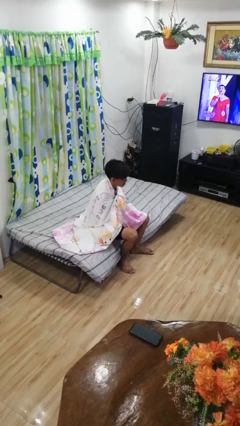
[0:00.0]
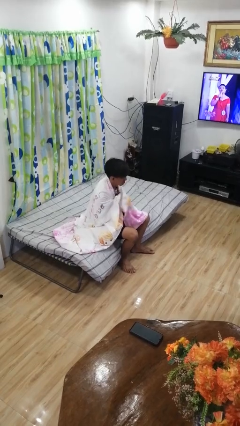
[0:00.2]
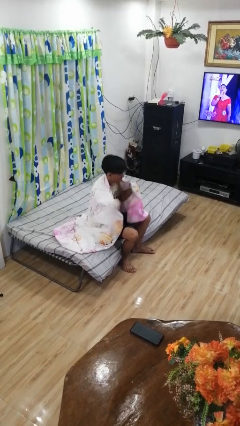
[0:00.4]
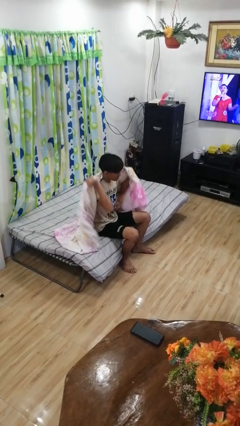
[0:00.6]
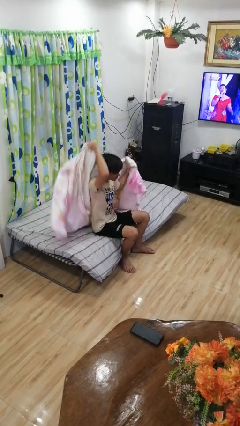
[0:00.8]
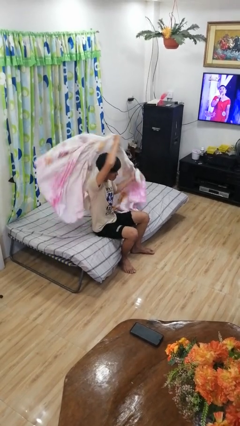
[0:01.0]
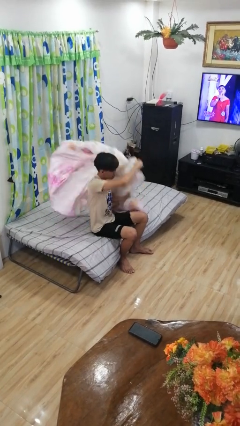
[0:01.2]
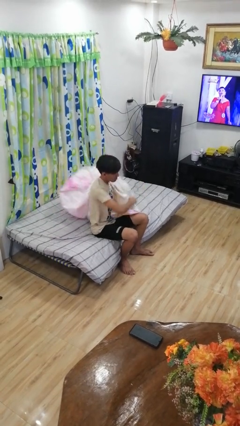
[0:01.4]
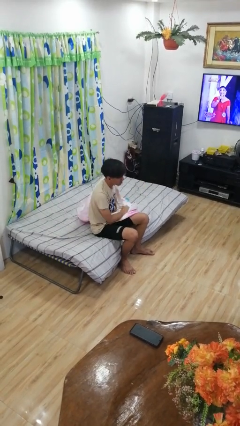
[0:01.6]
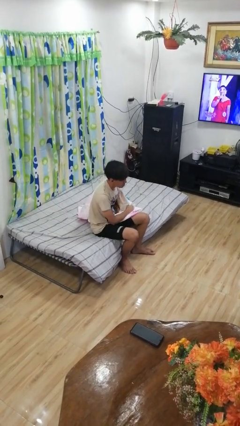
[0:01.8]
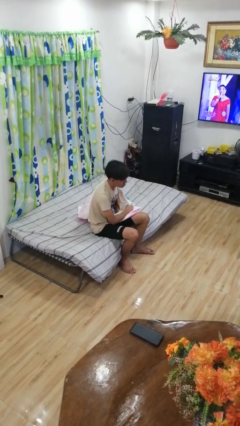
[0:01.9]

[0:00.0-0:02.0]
person uncovers with blanket

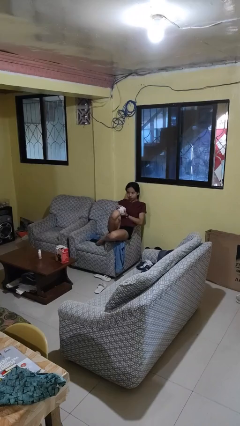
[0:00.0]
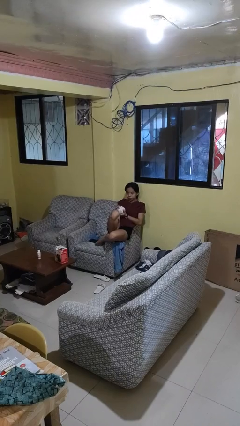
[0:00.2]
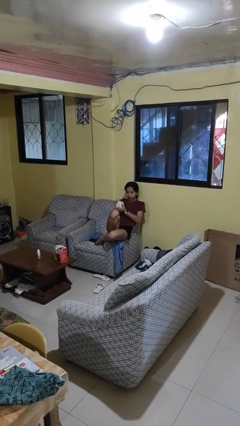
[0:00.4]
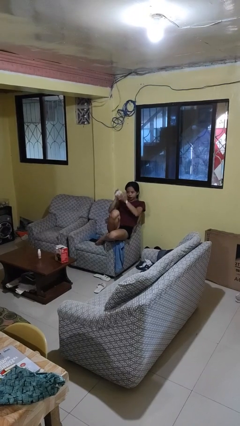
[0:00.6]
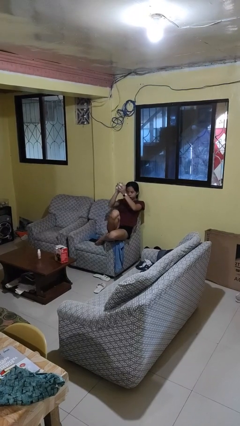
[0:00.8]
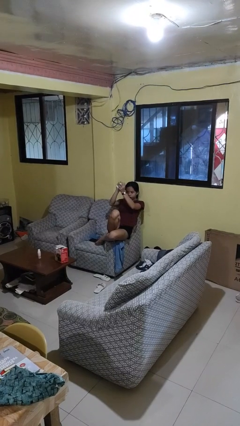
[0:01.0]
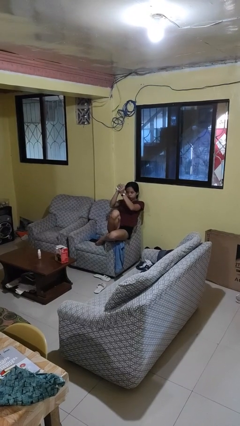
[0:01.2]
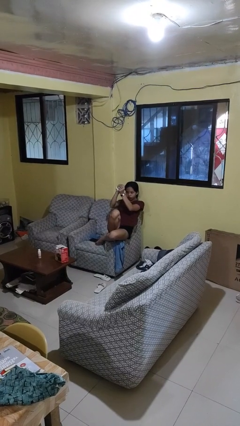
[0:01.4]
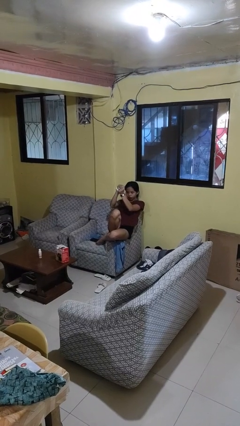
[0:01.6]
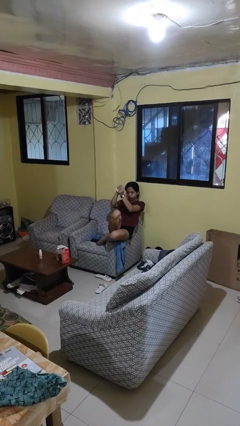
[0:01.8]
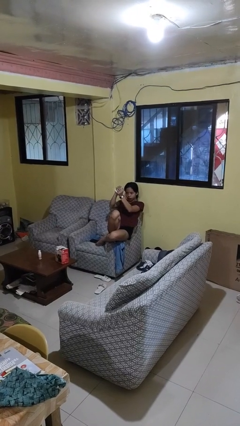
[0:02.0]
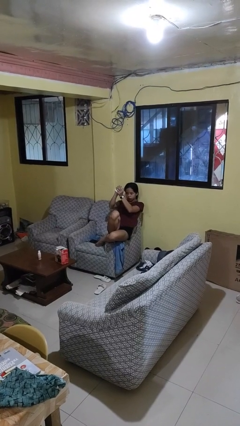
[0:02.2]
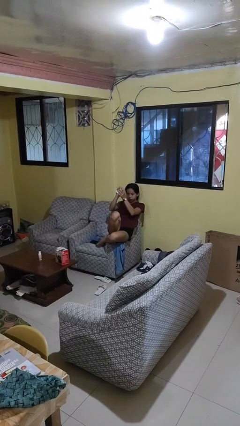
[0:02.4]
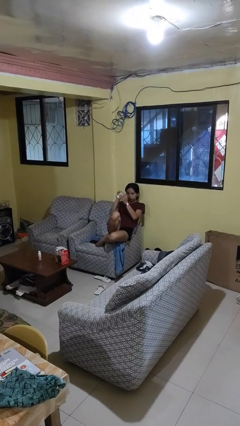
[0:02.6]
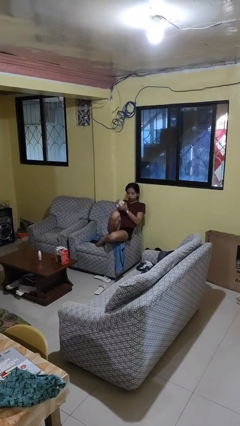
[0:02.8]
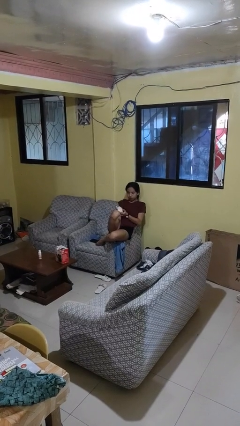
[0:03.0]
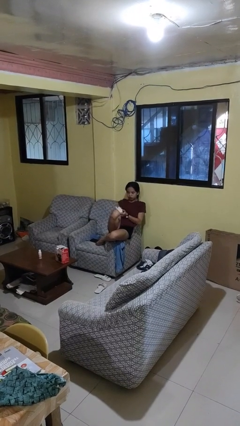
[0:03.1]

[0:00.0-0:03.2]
person squeezes object

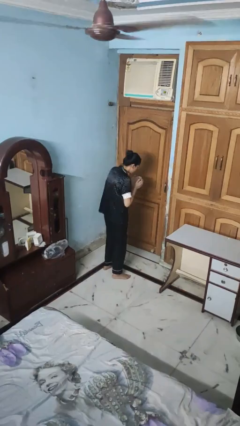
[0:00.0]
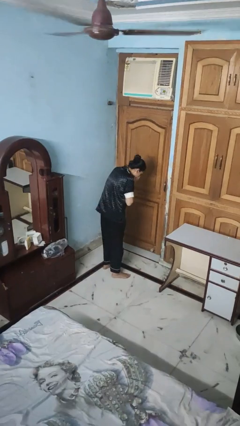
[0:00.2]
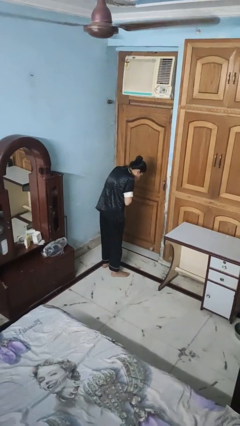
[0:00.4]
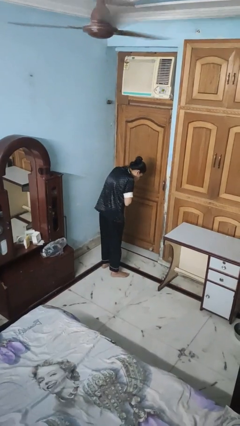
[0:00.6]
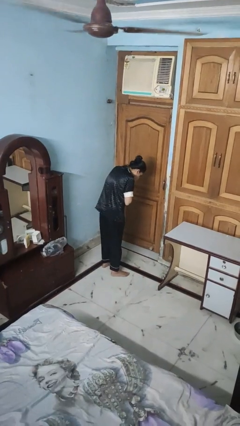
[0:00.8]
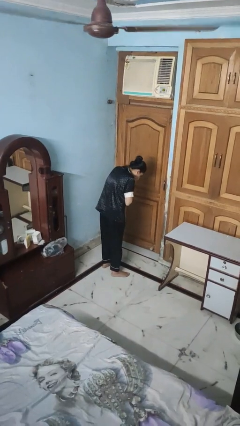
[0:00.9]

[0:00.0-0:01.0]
person sneezes into hand

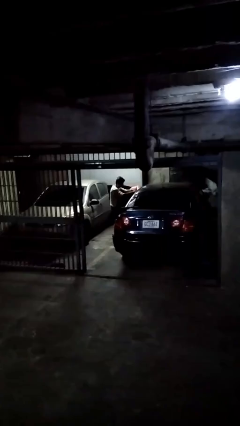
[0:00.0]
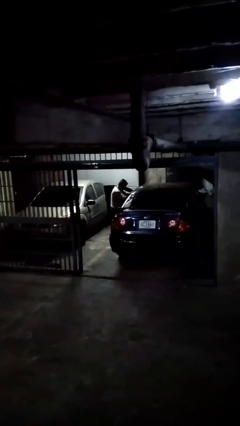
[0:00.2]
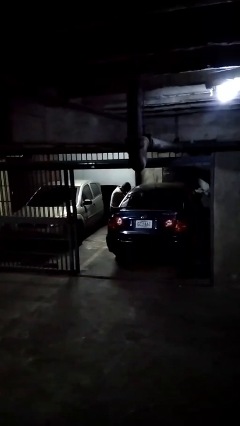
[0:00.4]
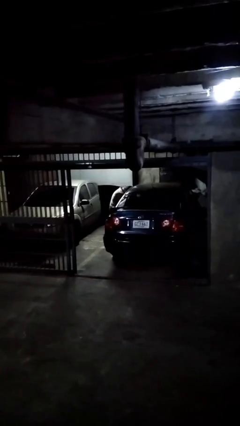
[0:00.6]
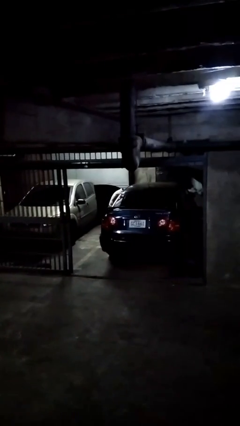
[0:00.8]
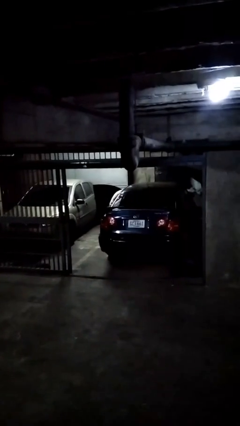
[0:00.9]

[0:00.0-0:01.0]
person loads car

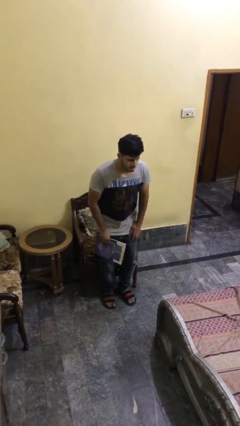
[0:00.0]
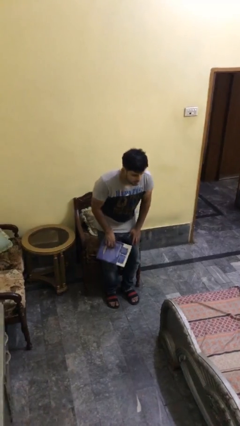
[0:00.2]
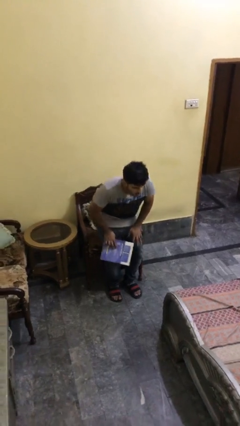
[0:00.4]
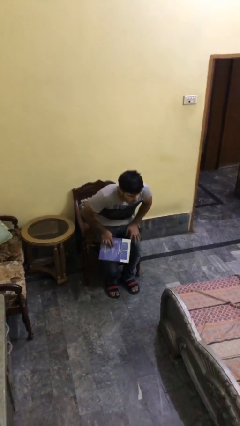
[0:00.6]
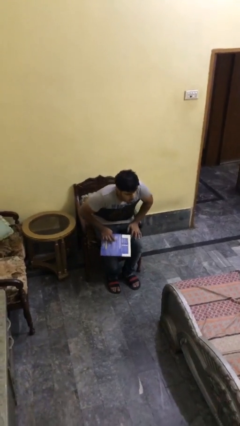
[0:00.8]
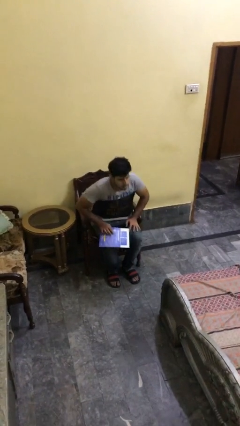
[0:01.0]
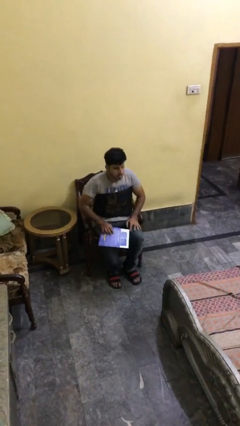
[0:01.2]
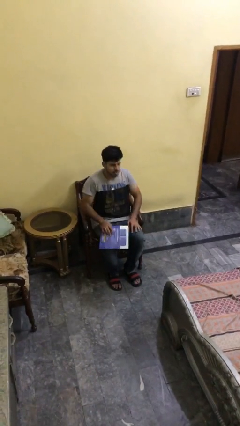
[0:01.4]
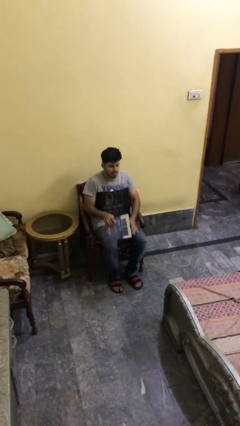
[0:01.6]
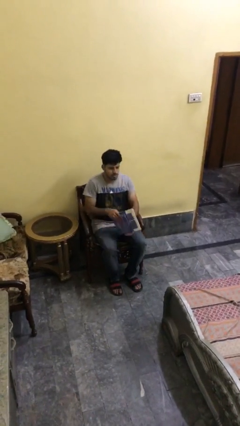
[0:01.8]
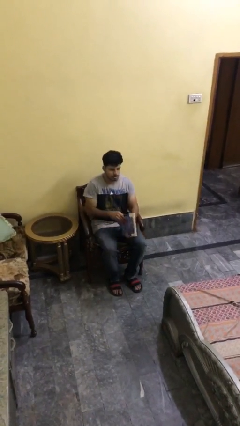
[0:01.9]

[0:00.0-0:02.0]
person sits down

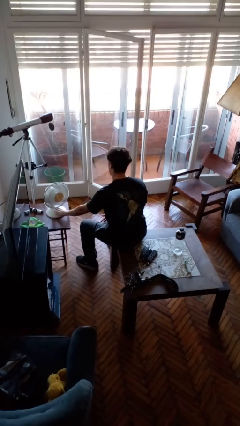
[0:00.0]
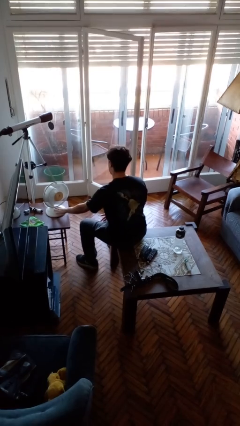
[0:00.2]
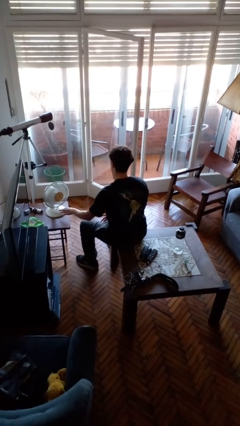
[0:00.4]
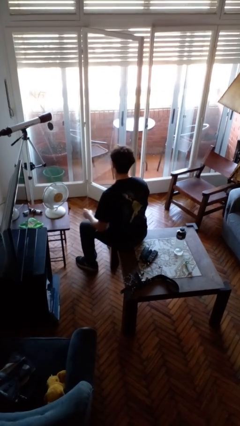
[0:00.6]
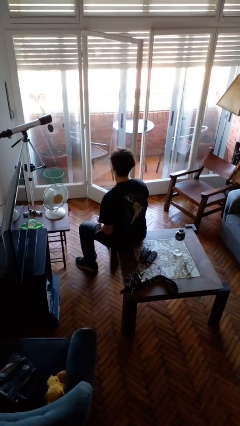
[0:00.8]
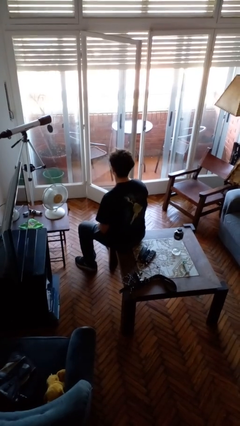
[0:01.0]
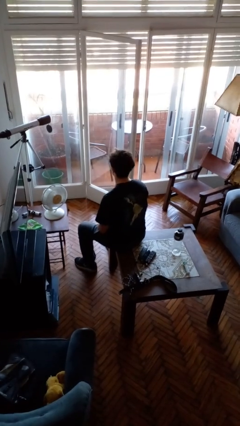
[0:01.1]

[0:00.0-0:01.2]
person turns off fan

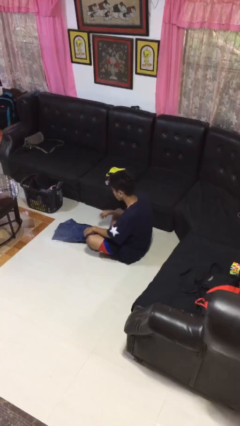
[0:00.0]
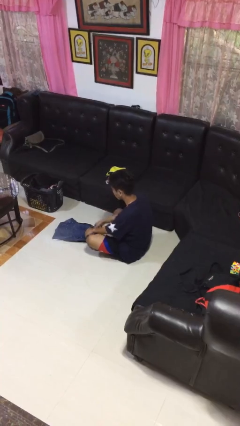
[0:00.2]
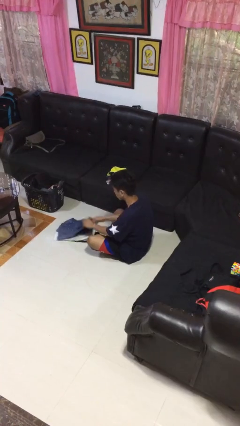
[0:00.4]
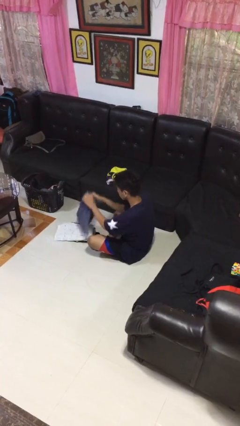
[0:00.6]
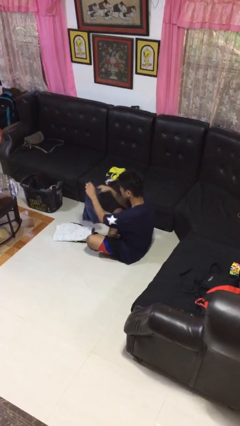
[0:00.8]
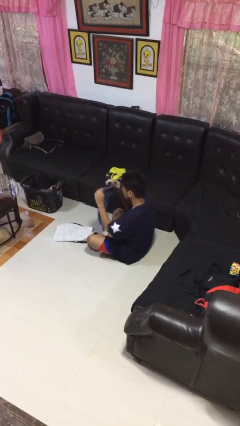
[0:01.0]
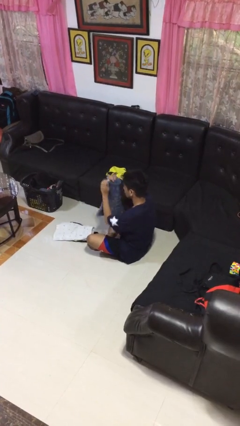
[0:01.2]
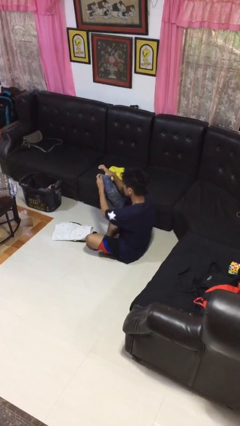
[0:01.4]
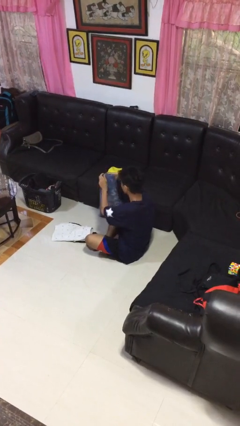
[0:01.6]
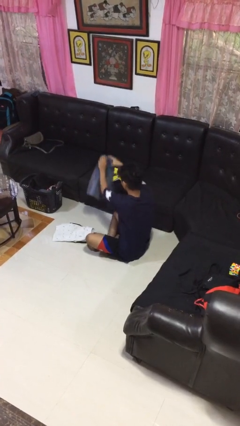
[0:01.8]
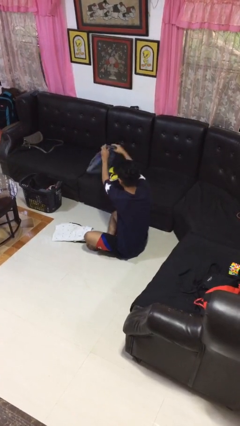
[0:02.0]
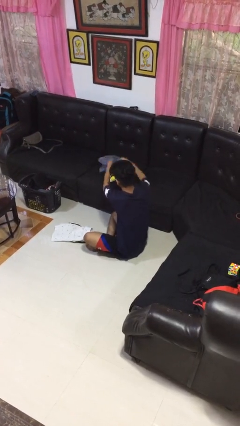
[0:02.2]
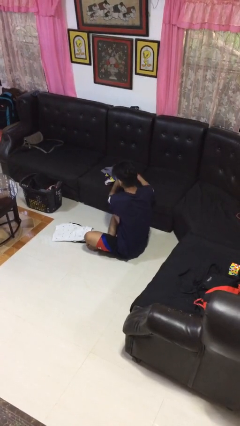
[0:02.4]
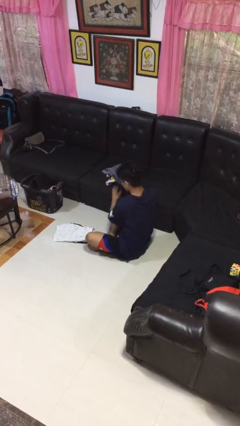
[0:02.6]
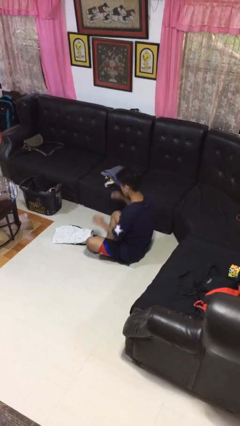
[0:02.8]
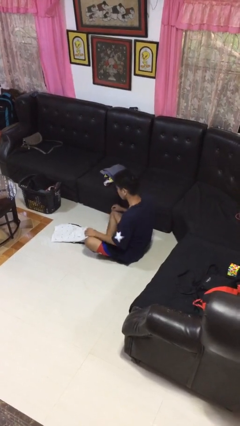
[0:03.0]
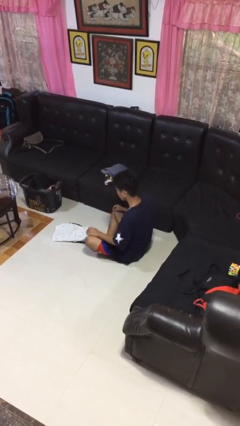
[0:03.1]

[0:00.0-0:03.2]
person folds pants

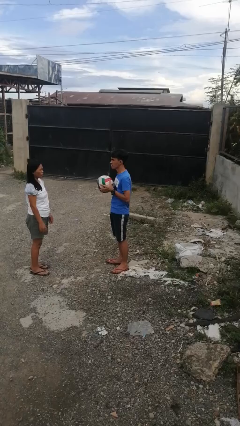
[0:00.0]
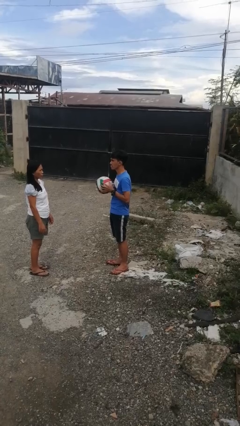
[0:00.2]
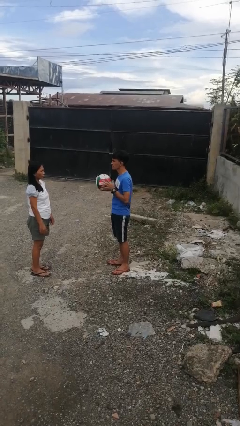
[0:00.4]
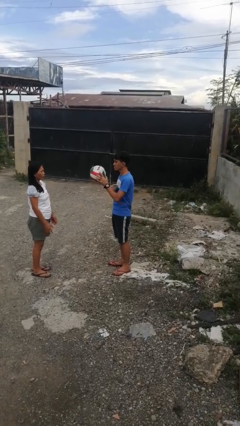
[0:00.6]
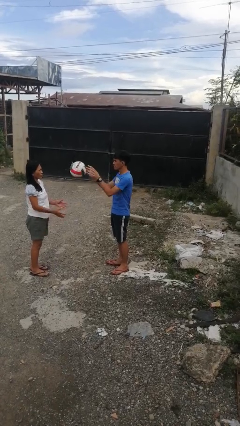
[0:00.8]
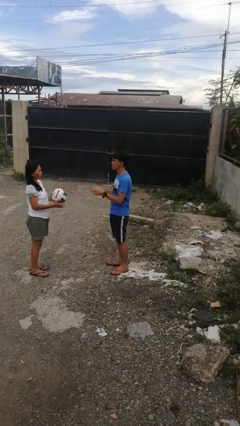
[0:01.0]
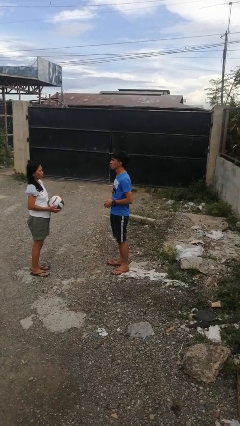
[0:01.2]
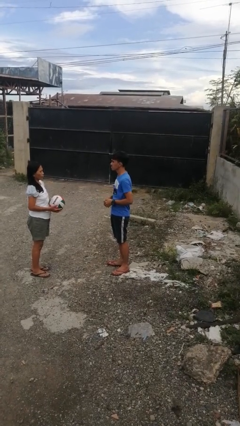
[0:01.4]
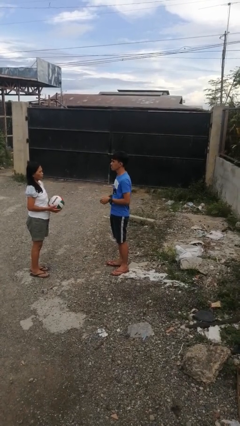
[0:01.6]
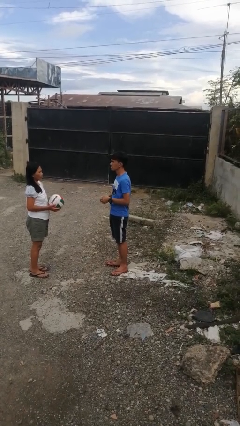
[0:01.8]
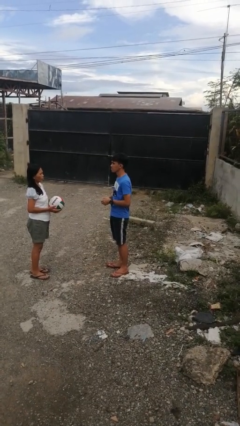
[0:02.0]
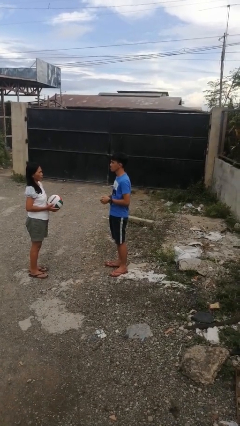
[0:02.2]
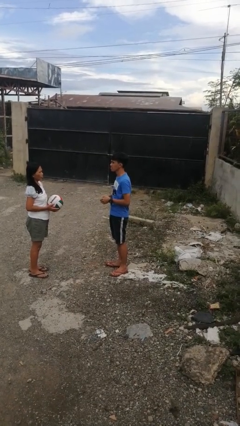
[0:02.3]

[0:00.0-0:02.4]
person throws object to person

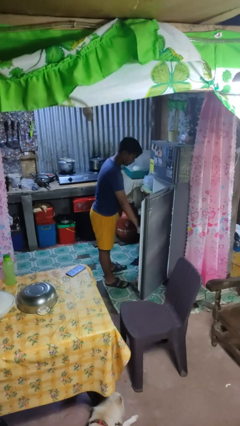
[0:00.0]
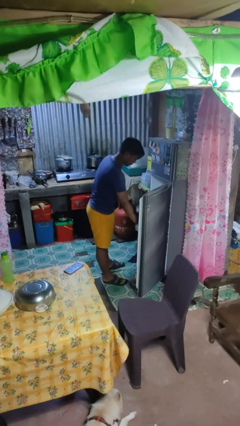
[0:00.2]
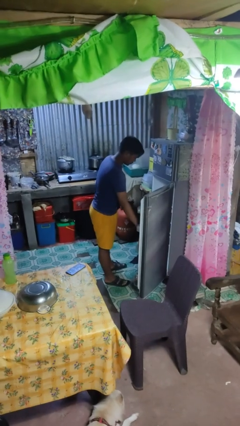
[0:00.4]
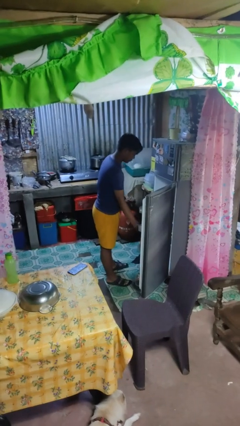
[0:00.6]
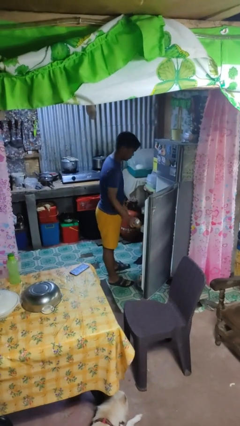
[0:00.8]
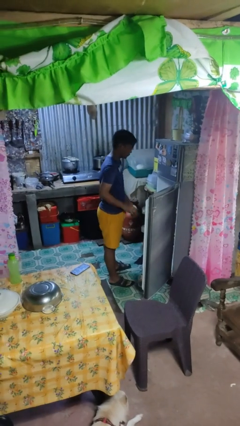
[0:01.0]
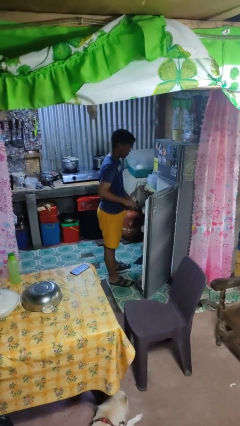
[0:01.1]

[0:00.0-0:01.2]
person takes object from refrigerator
